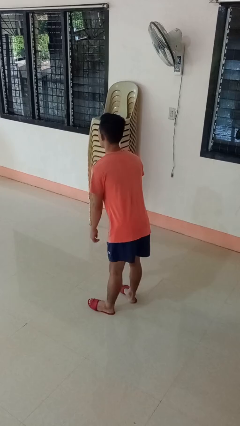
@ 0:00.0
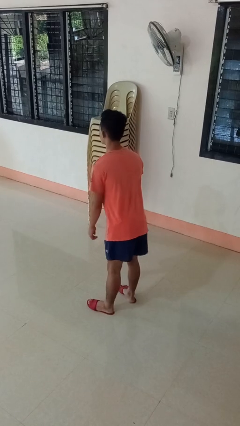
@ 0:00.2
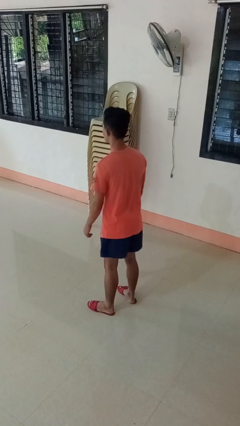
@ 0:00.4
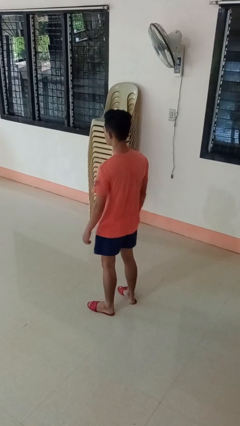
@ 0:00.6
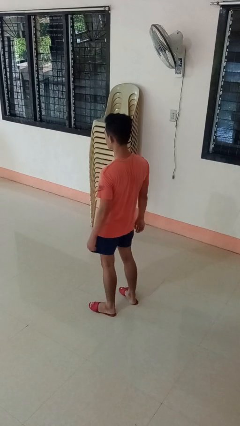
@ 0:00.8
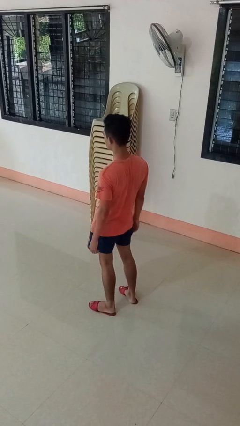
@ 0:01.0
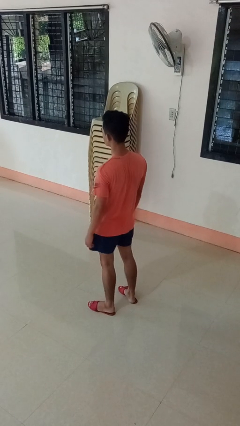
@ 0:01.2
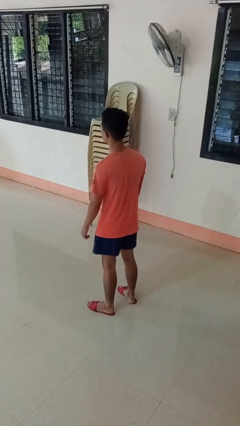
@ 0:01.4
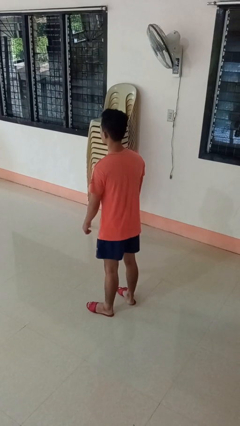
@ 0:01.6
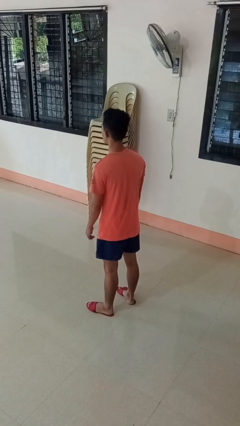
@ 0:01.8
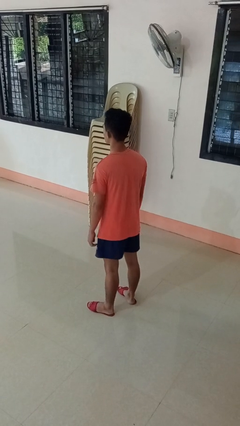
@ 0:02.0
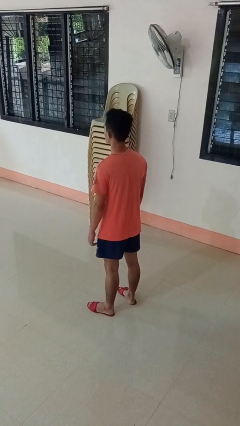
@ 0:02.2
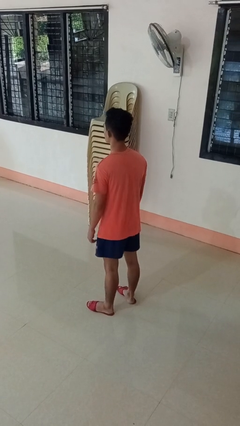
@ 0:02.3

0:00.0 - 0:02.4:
person wiggles hips

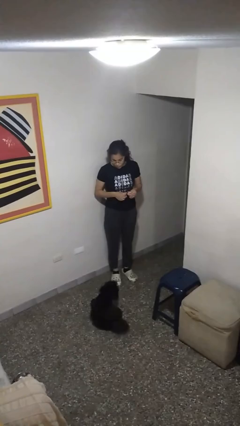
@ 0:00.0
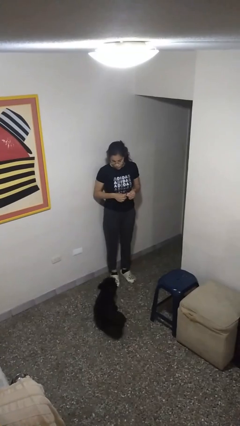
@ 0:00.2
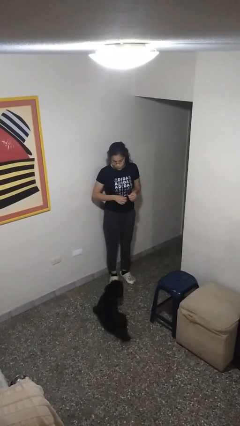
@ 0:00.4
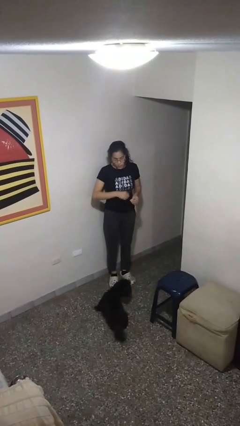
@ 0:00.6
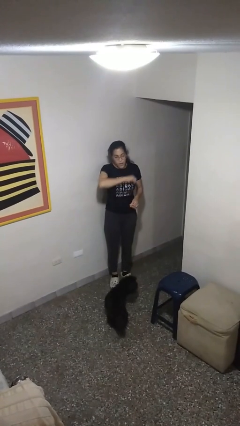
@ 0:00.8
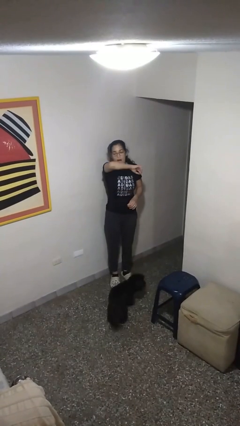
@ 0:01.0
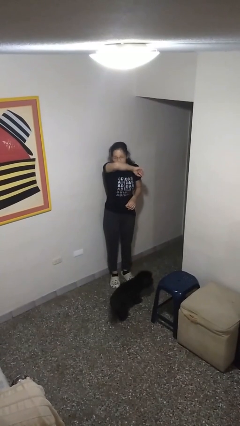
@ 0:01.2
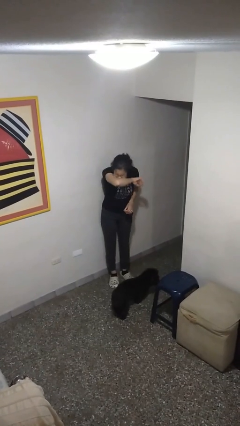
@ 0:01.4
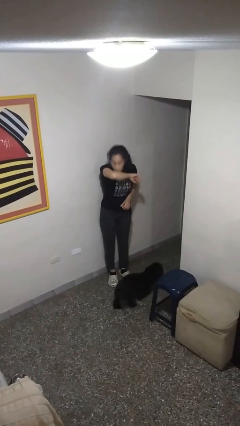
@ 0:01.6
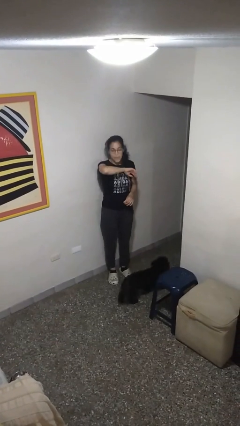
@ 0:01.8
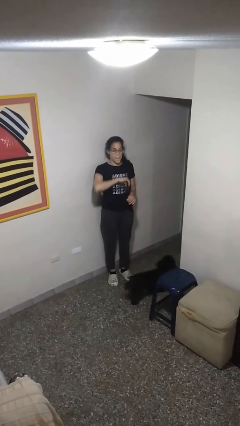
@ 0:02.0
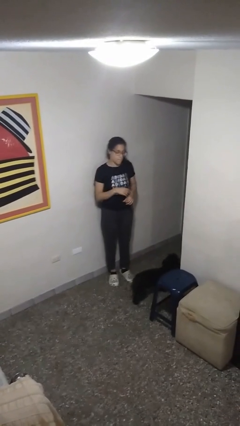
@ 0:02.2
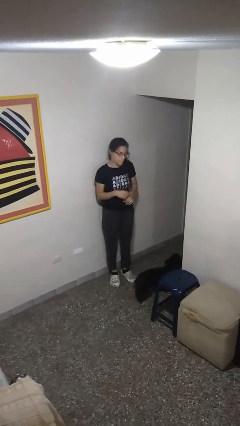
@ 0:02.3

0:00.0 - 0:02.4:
person sneezes into arm

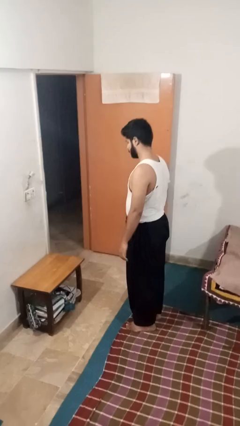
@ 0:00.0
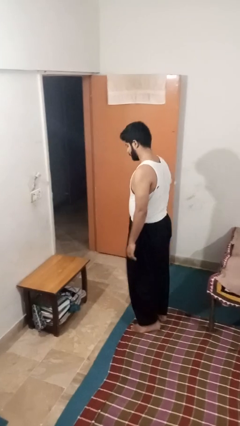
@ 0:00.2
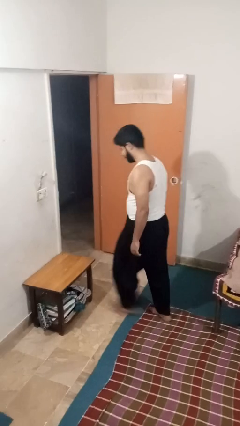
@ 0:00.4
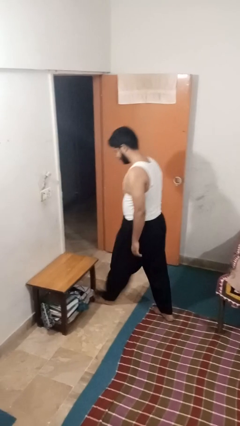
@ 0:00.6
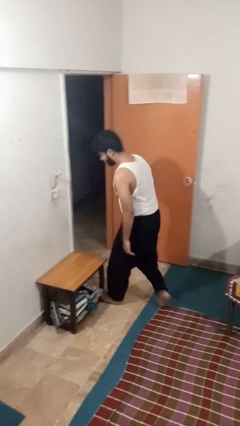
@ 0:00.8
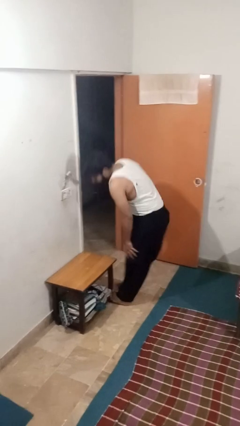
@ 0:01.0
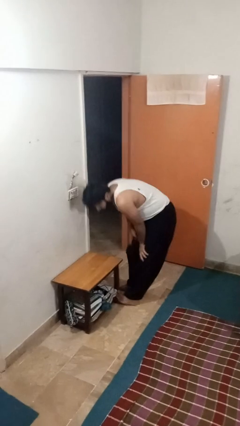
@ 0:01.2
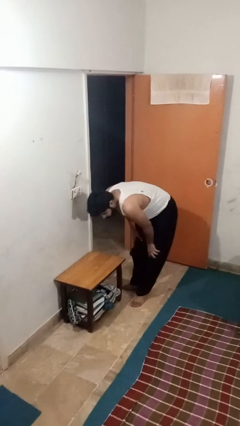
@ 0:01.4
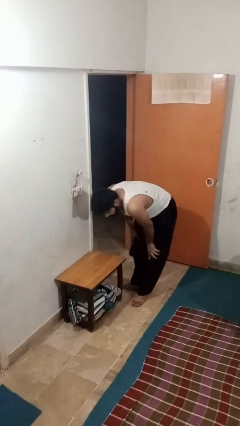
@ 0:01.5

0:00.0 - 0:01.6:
person bumps into table

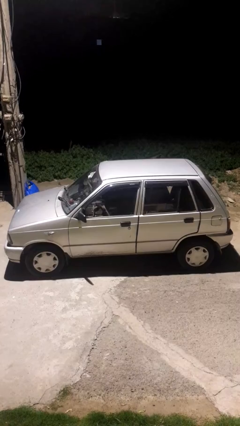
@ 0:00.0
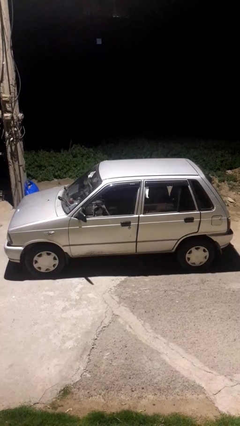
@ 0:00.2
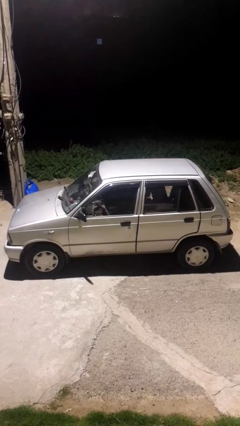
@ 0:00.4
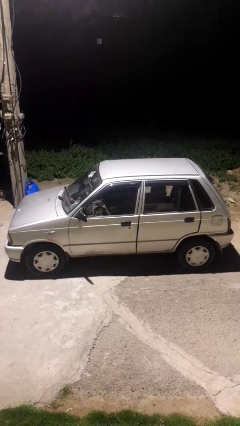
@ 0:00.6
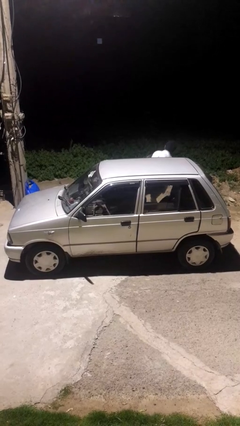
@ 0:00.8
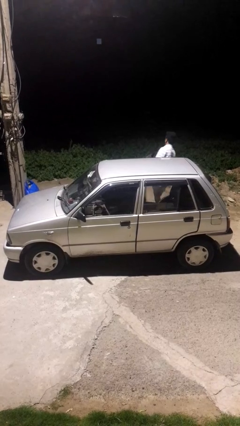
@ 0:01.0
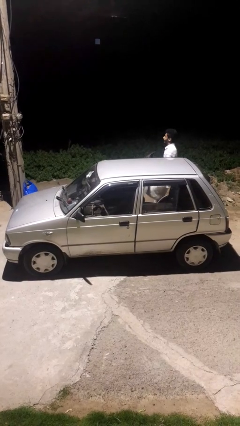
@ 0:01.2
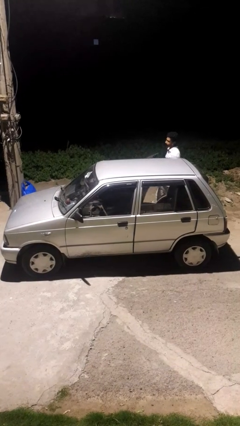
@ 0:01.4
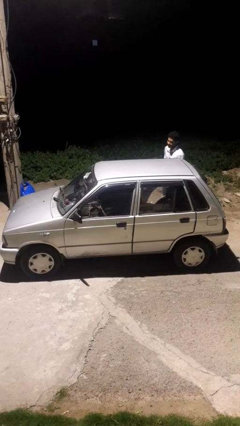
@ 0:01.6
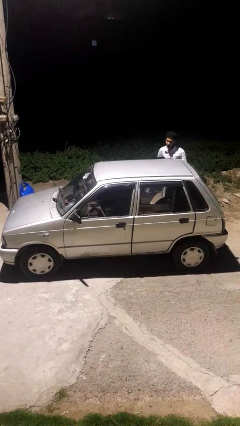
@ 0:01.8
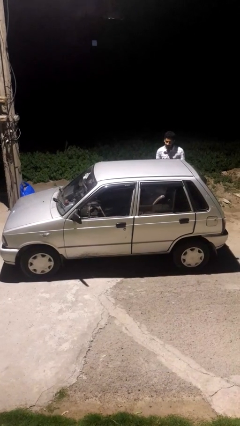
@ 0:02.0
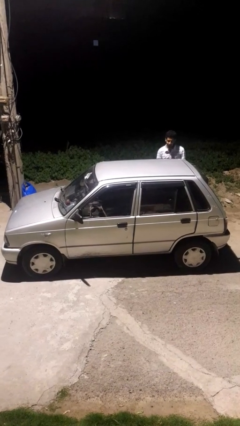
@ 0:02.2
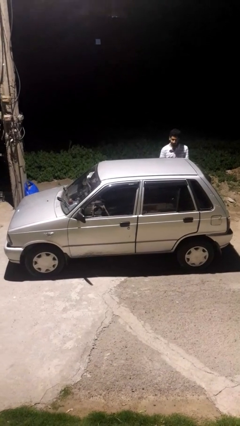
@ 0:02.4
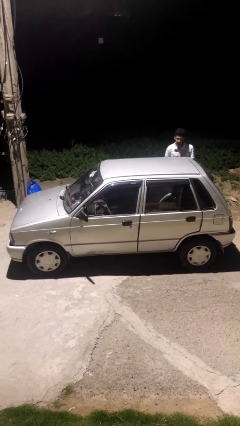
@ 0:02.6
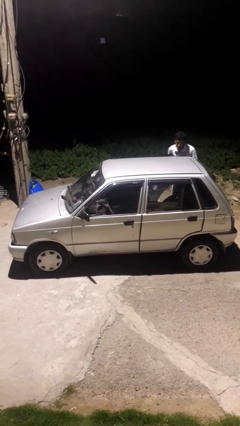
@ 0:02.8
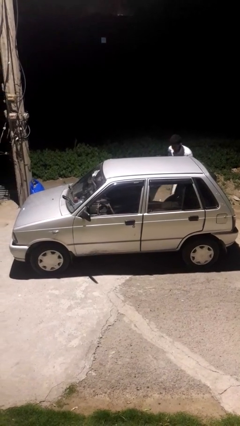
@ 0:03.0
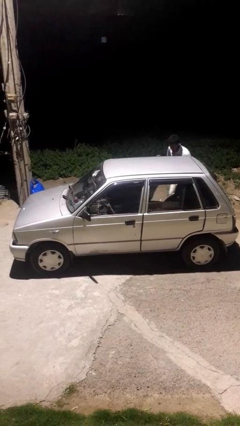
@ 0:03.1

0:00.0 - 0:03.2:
car drops off person

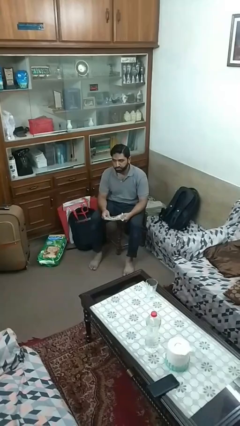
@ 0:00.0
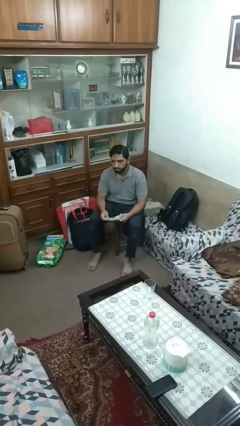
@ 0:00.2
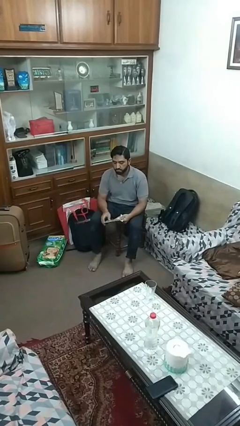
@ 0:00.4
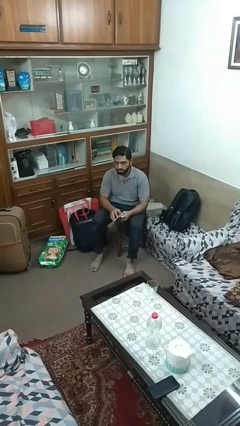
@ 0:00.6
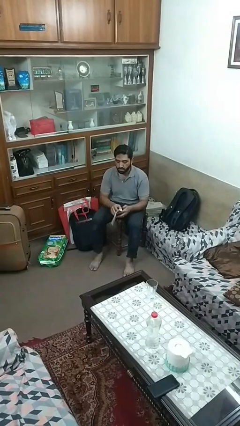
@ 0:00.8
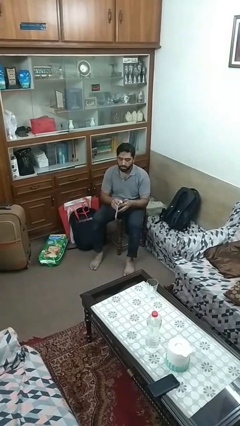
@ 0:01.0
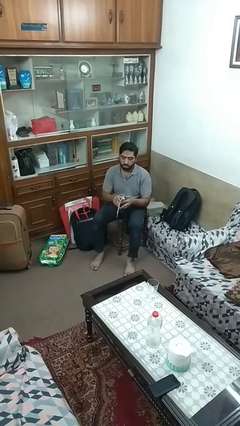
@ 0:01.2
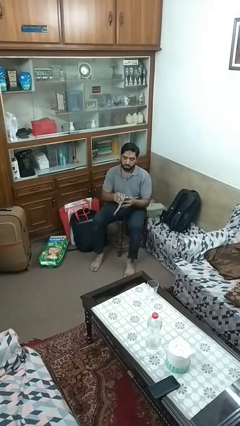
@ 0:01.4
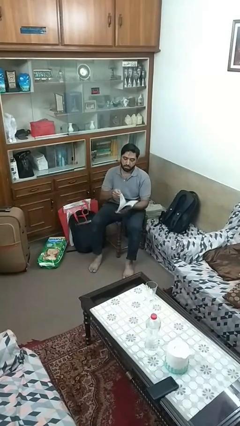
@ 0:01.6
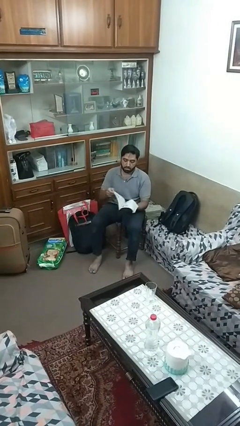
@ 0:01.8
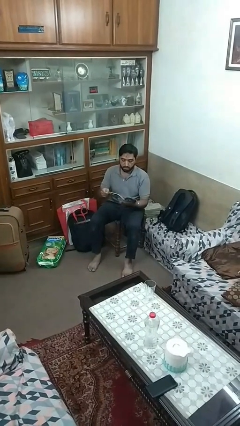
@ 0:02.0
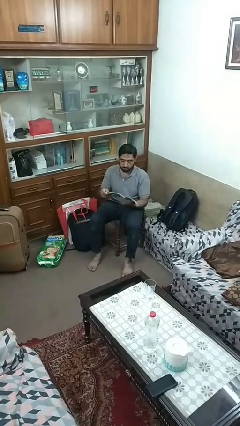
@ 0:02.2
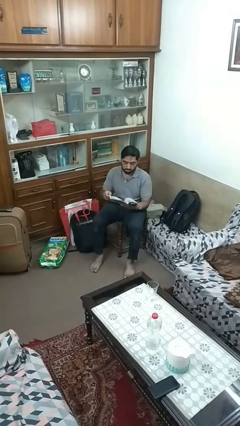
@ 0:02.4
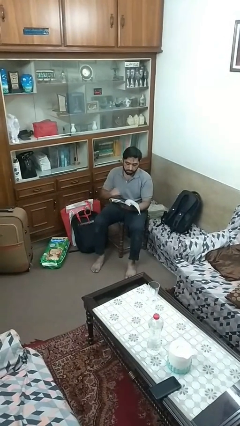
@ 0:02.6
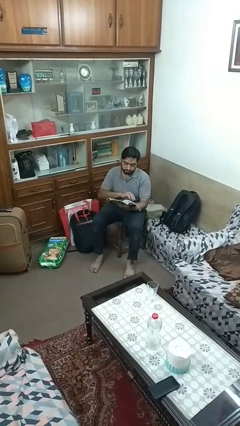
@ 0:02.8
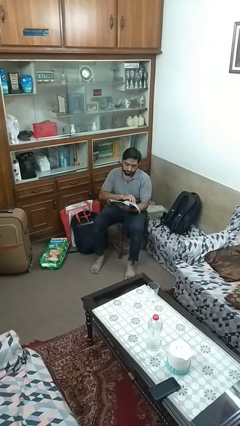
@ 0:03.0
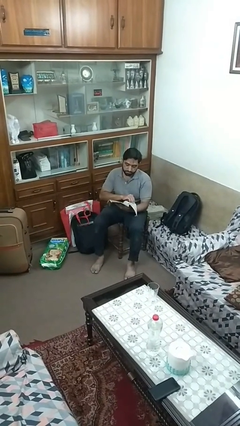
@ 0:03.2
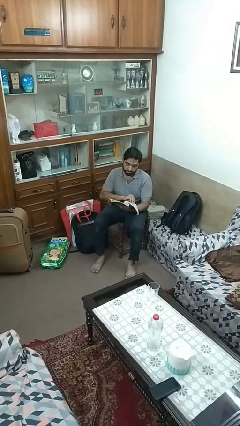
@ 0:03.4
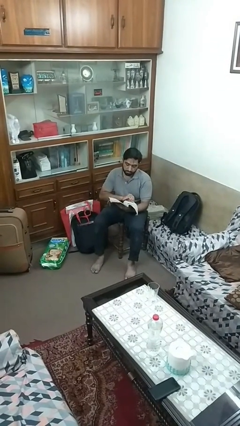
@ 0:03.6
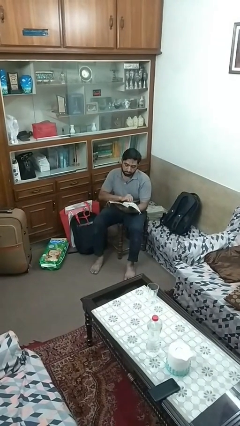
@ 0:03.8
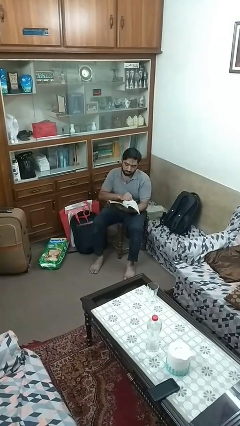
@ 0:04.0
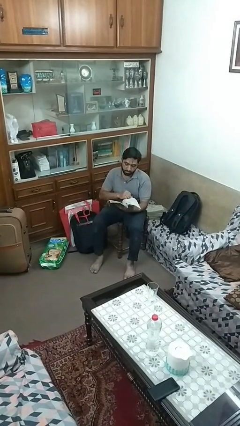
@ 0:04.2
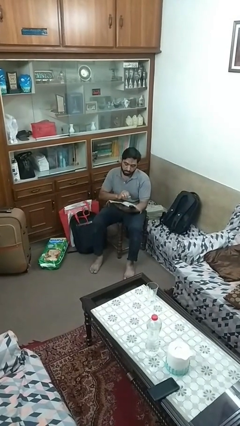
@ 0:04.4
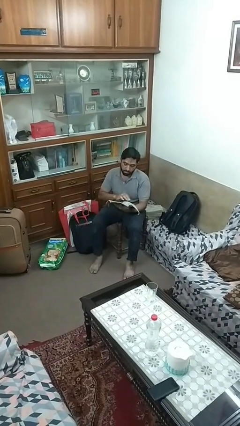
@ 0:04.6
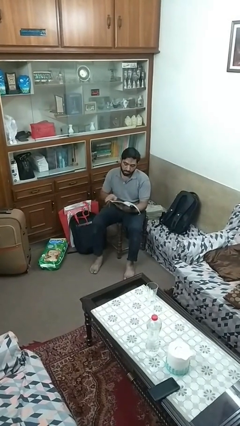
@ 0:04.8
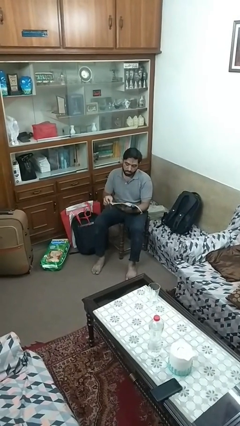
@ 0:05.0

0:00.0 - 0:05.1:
person reads magazine

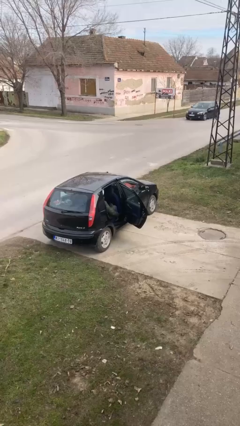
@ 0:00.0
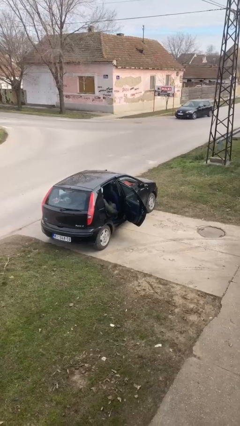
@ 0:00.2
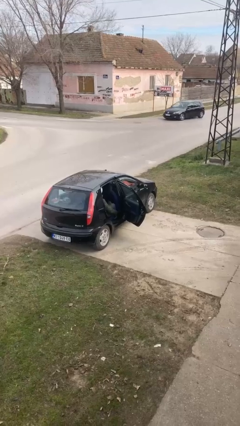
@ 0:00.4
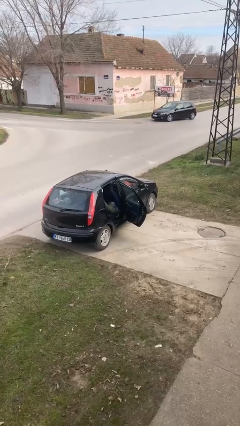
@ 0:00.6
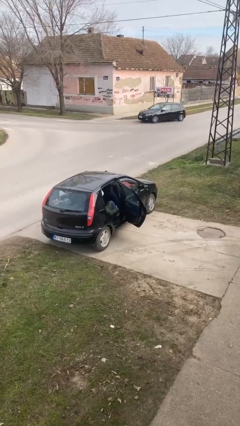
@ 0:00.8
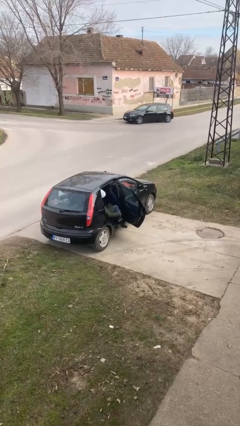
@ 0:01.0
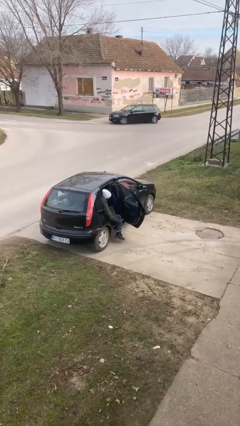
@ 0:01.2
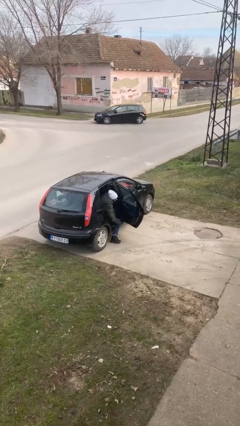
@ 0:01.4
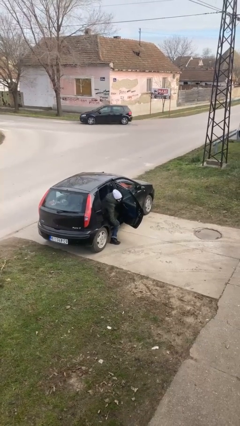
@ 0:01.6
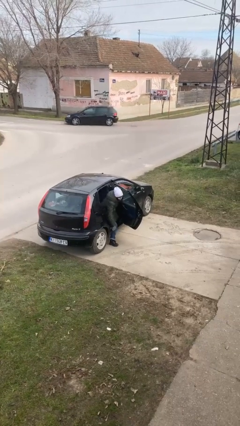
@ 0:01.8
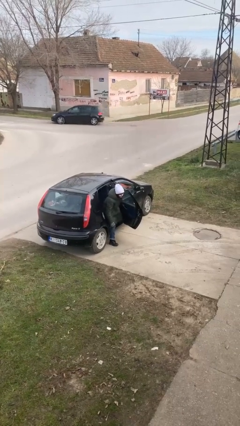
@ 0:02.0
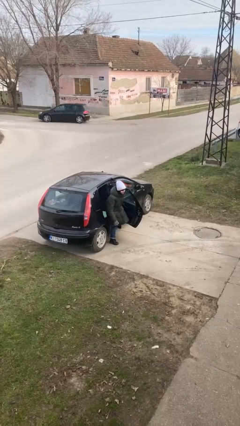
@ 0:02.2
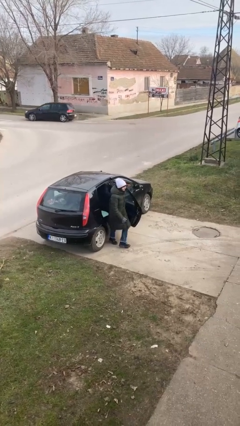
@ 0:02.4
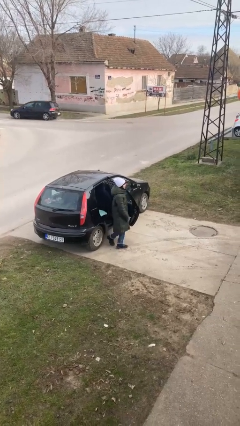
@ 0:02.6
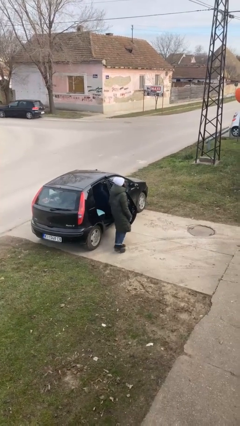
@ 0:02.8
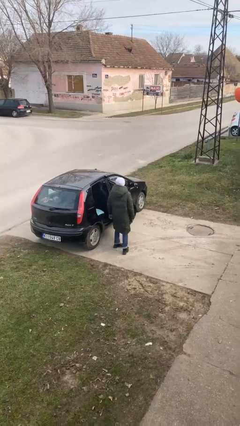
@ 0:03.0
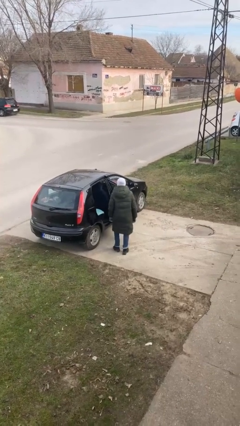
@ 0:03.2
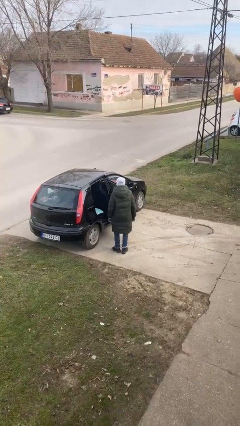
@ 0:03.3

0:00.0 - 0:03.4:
person exits car
